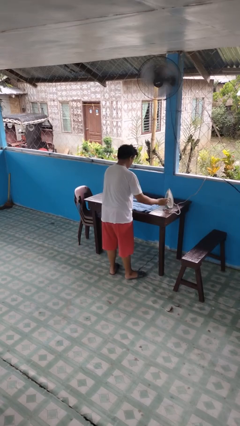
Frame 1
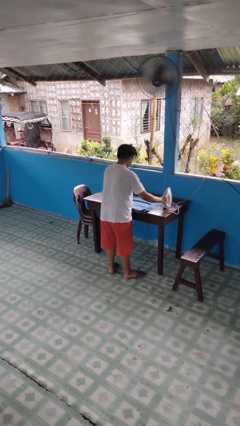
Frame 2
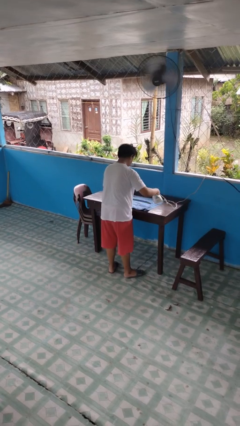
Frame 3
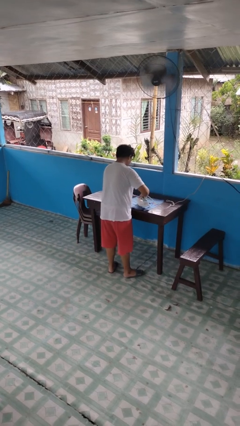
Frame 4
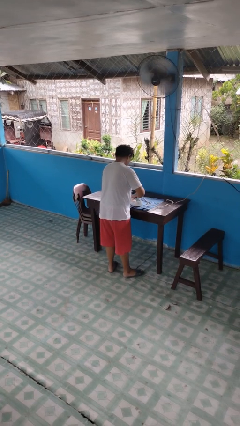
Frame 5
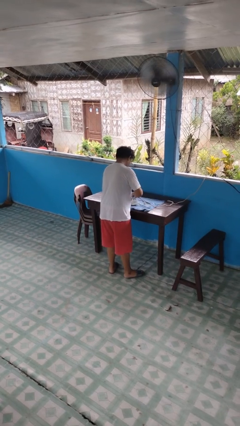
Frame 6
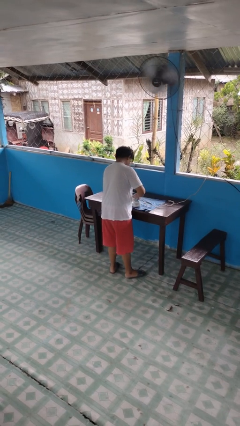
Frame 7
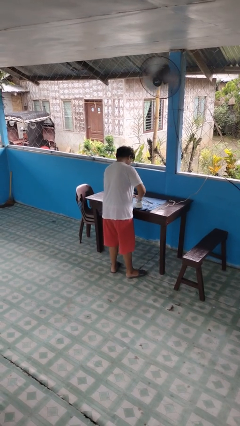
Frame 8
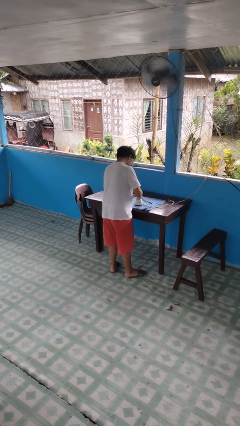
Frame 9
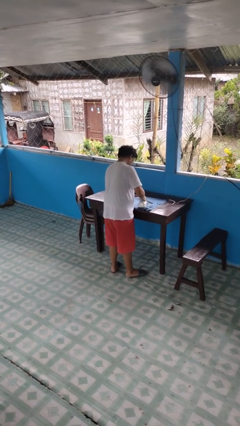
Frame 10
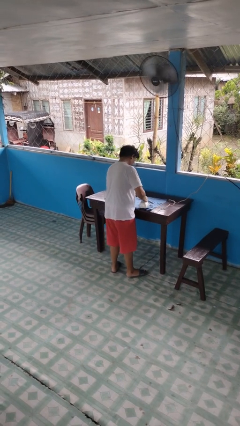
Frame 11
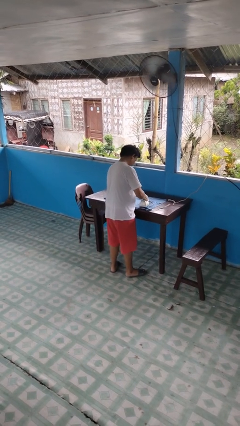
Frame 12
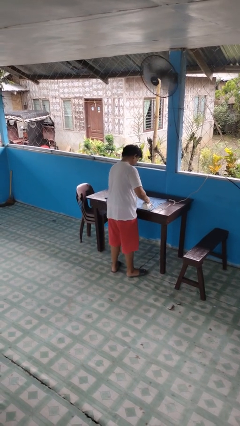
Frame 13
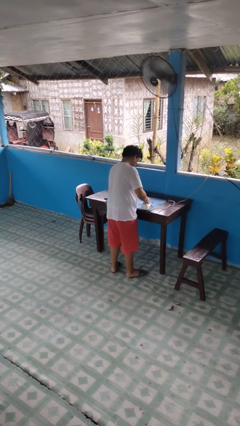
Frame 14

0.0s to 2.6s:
person irons clothes

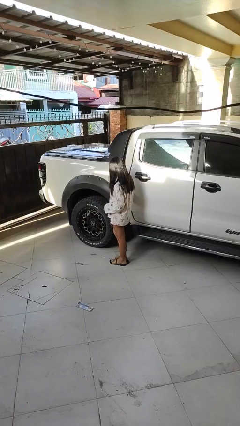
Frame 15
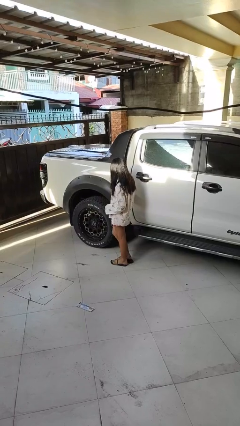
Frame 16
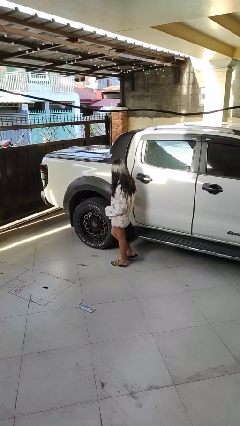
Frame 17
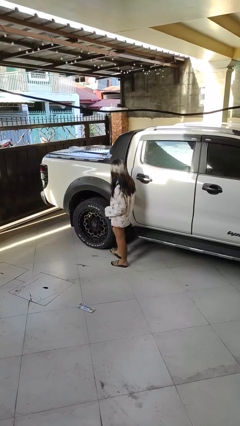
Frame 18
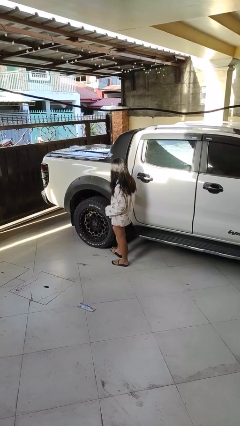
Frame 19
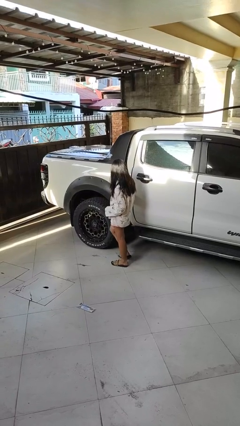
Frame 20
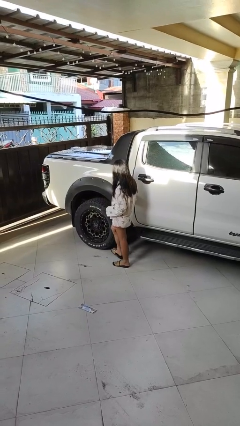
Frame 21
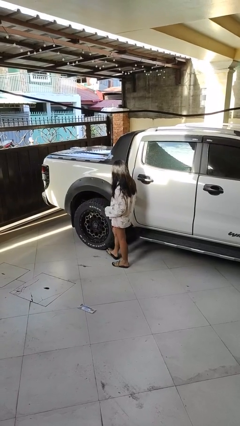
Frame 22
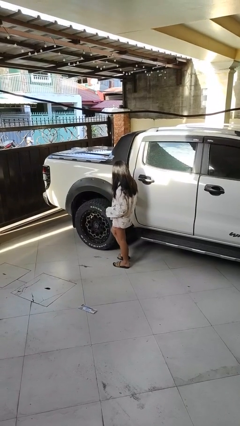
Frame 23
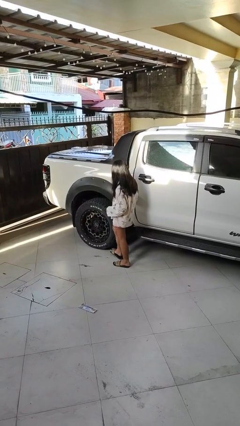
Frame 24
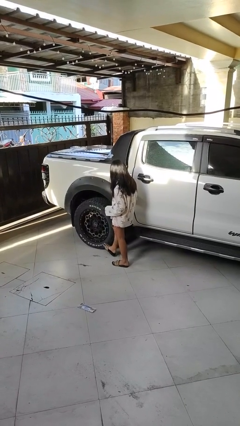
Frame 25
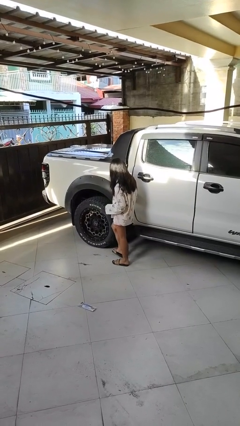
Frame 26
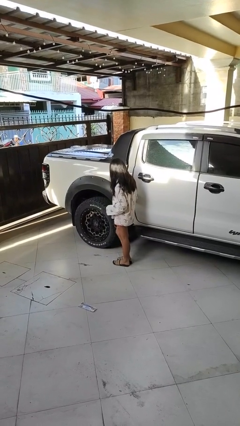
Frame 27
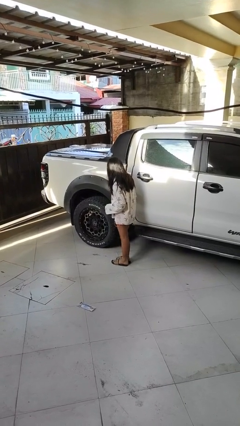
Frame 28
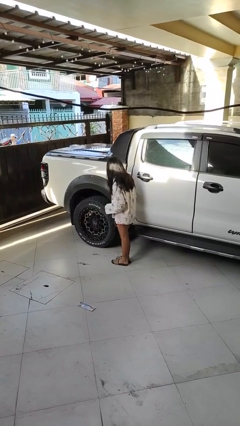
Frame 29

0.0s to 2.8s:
person kicks car tires

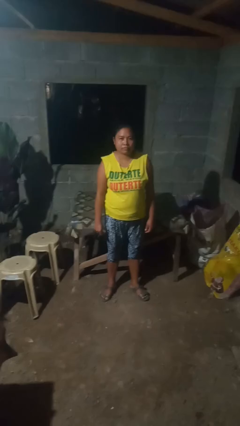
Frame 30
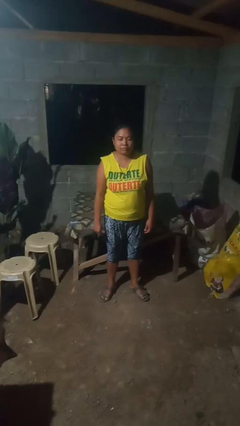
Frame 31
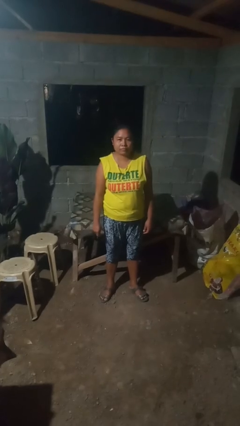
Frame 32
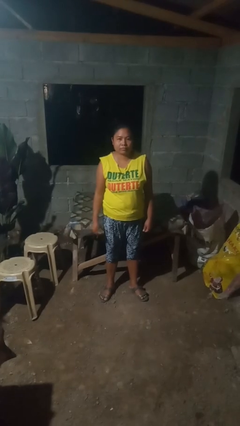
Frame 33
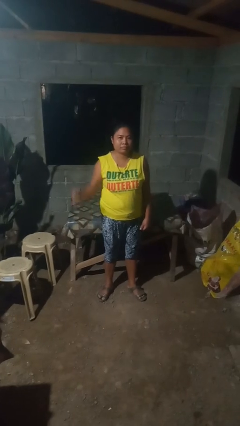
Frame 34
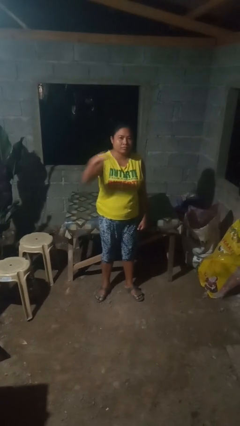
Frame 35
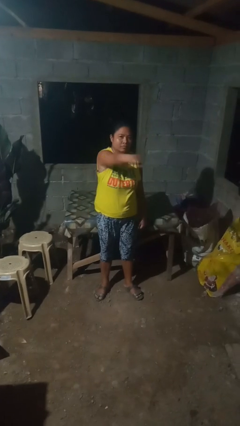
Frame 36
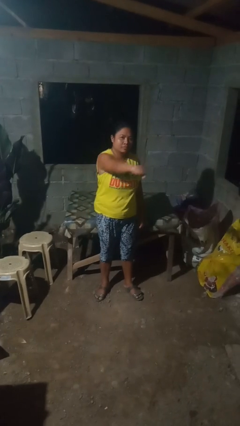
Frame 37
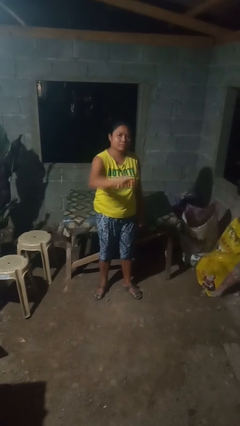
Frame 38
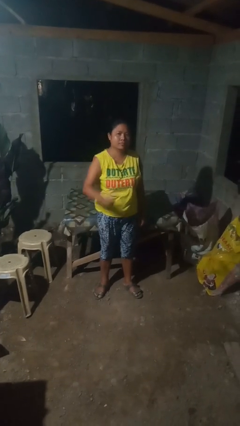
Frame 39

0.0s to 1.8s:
person punches

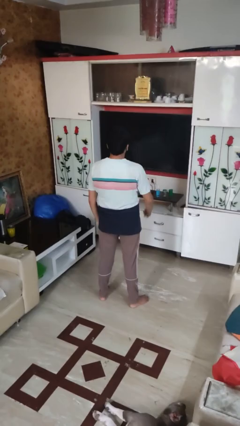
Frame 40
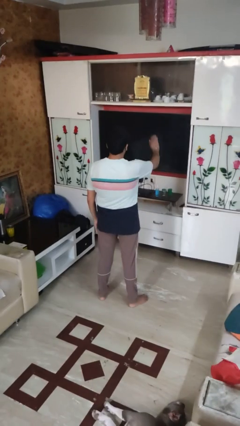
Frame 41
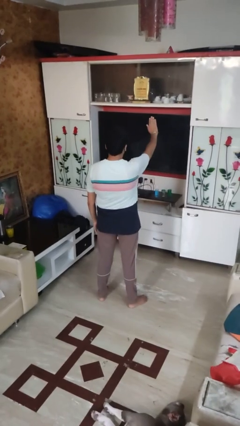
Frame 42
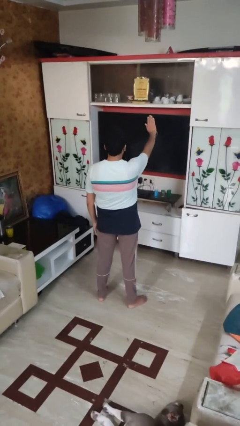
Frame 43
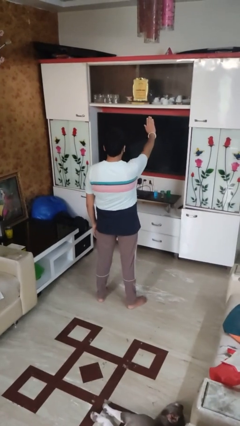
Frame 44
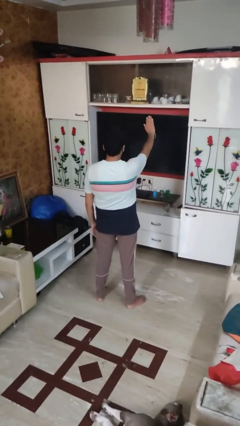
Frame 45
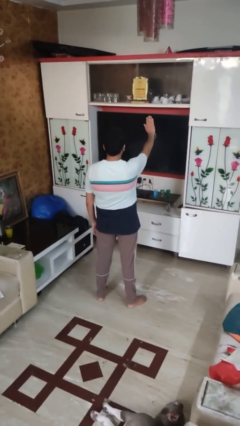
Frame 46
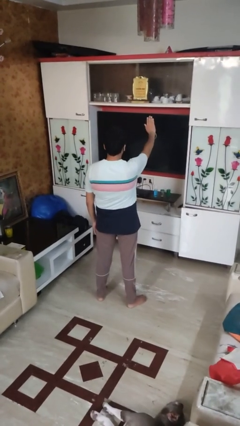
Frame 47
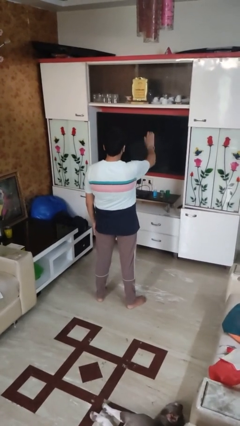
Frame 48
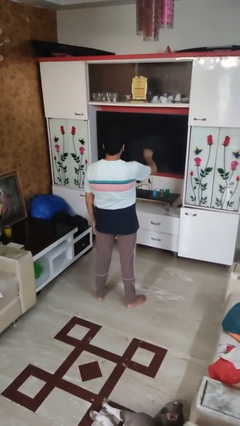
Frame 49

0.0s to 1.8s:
person gestures stop

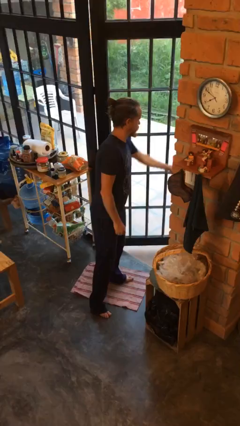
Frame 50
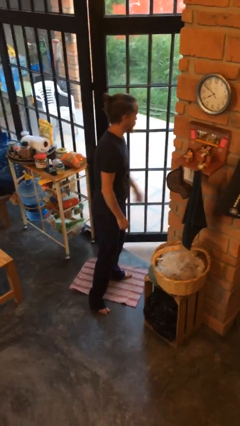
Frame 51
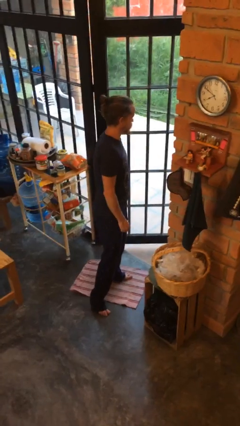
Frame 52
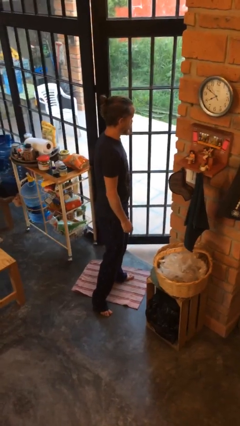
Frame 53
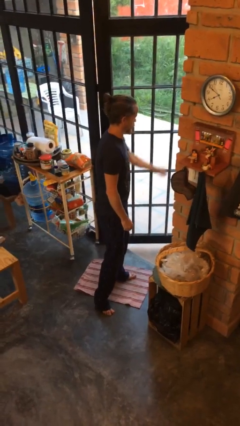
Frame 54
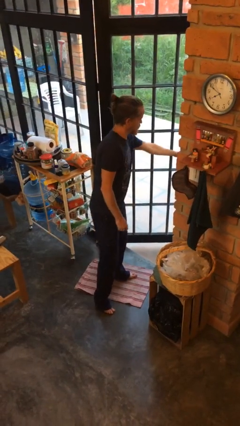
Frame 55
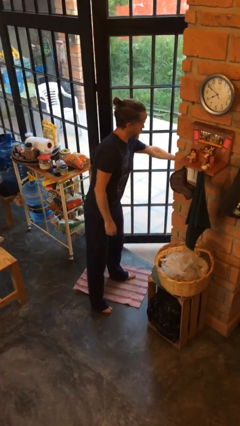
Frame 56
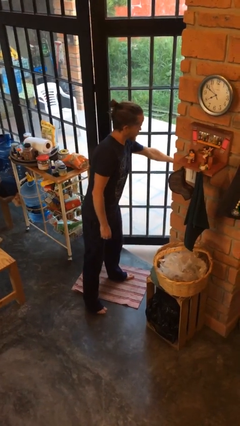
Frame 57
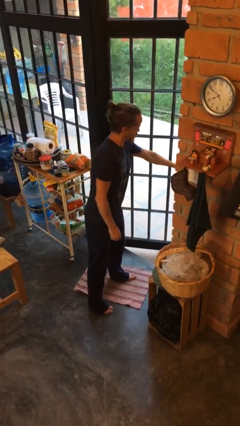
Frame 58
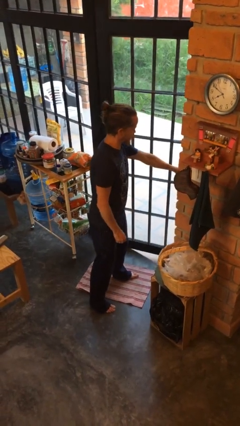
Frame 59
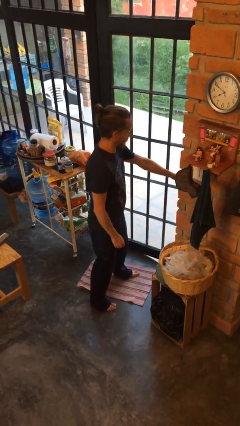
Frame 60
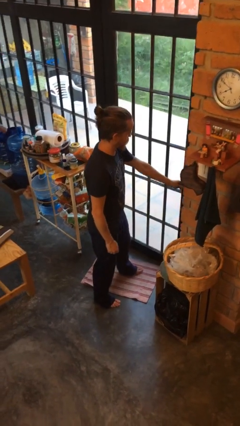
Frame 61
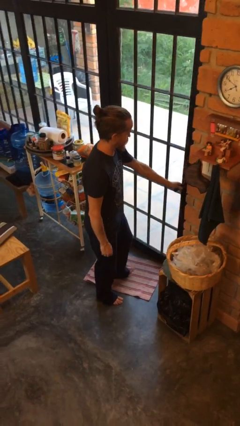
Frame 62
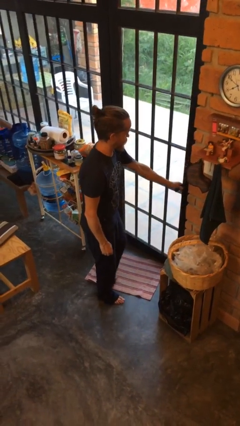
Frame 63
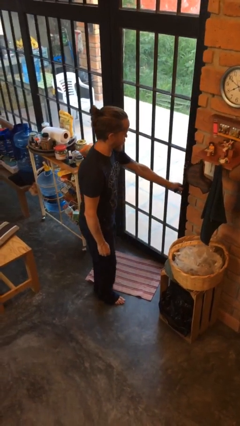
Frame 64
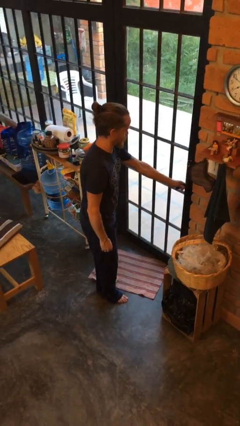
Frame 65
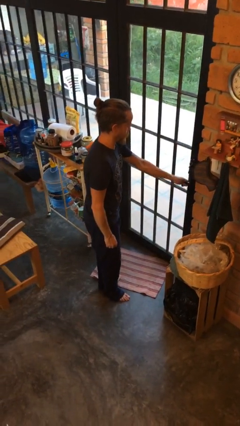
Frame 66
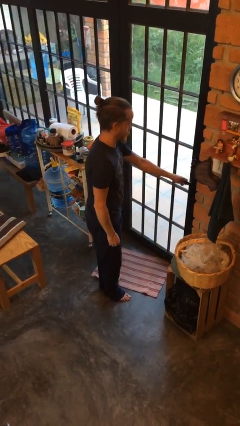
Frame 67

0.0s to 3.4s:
person closes facility door

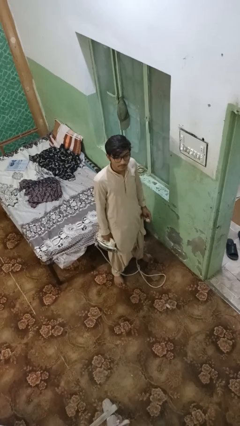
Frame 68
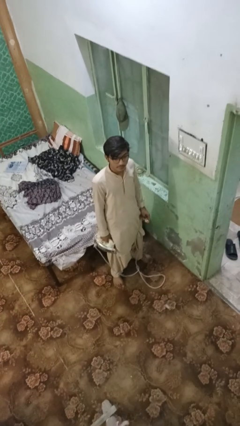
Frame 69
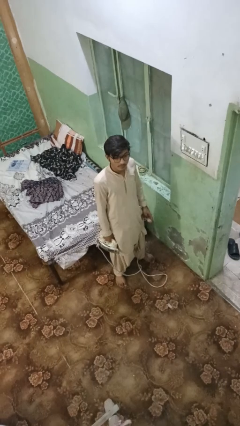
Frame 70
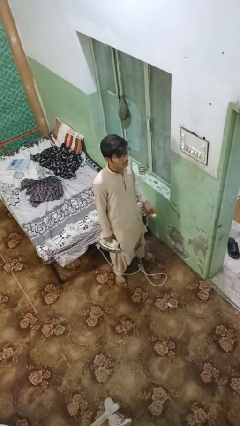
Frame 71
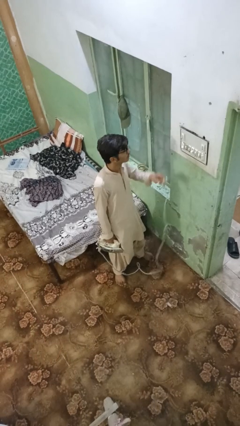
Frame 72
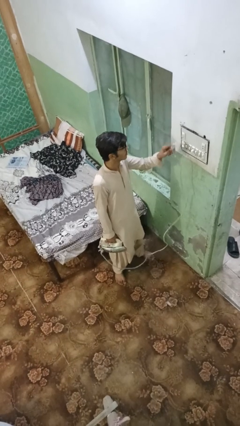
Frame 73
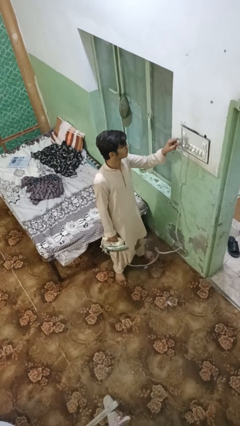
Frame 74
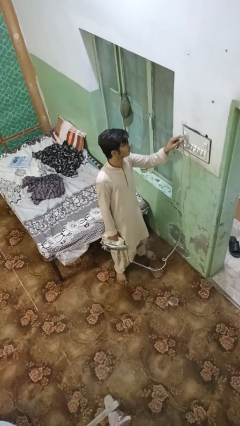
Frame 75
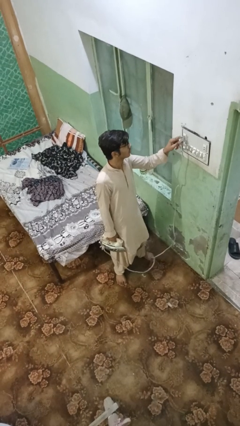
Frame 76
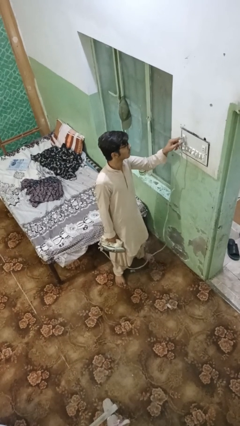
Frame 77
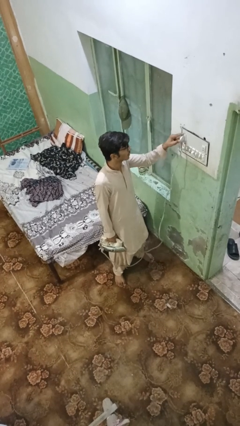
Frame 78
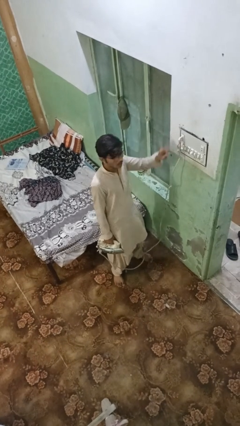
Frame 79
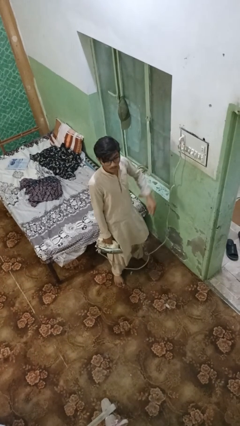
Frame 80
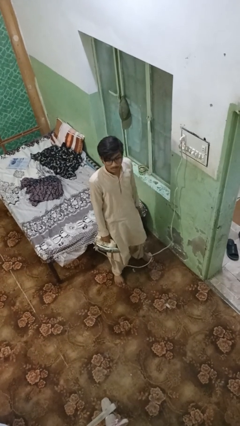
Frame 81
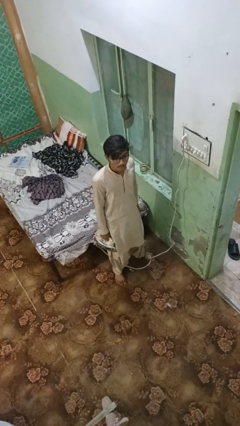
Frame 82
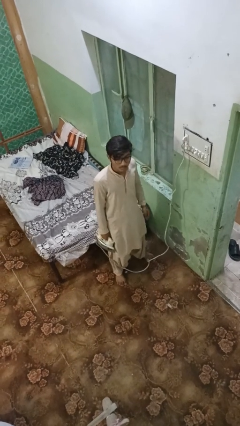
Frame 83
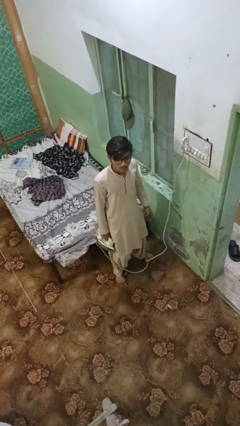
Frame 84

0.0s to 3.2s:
person plugs into electrical socket

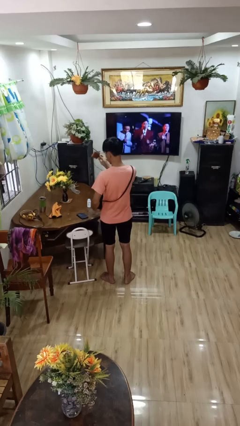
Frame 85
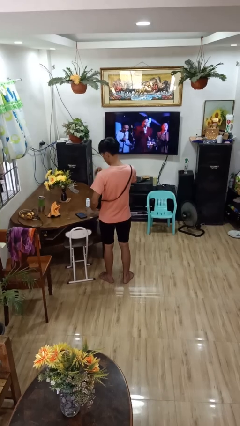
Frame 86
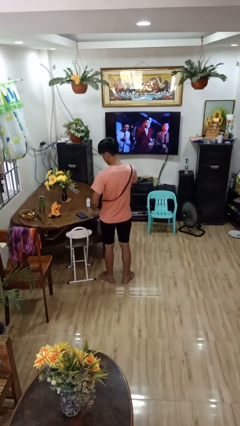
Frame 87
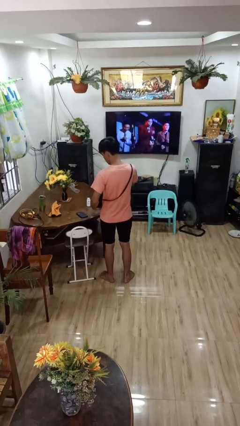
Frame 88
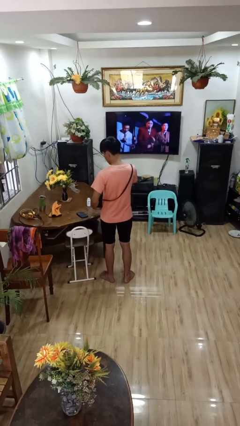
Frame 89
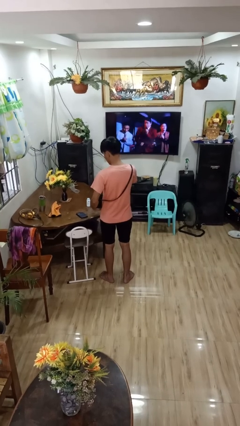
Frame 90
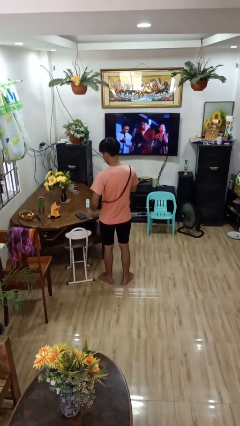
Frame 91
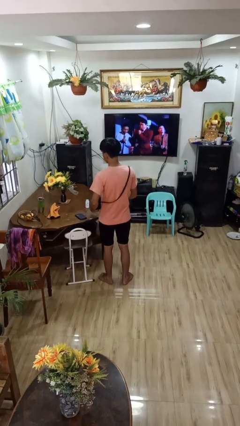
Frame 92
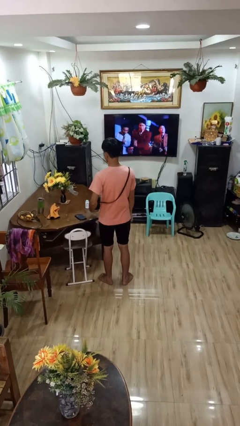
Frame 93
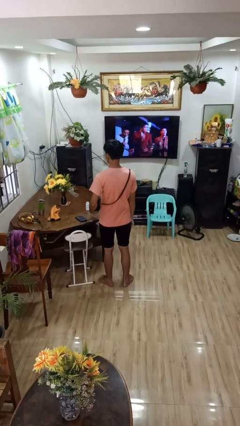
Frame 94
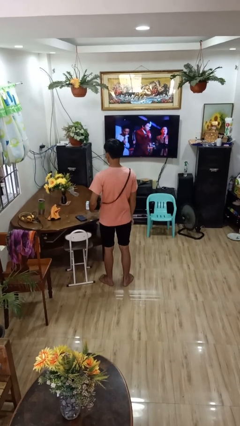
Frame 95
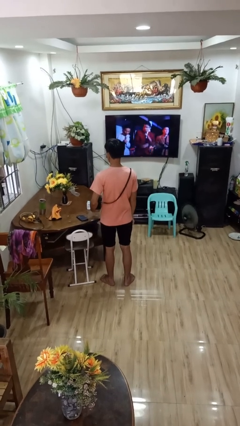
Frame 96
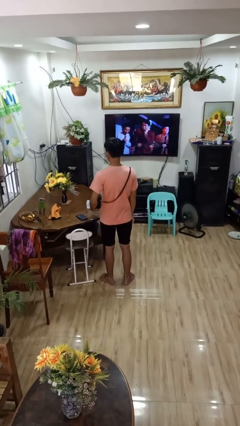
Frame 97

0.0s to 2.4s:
person puts object into purse
